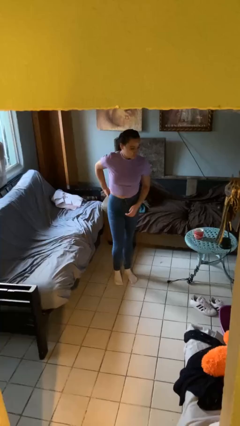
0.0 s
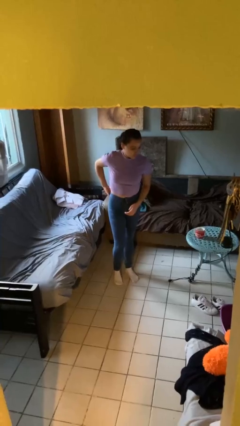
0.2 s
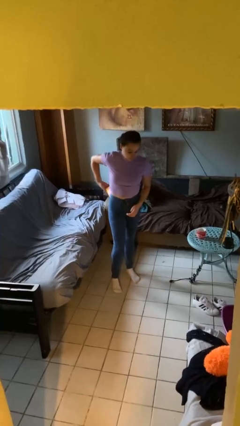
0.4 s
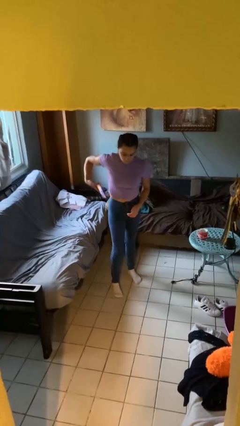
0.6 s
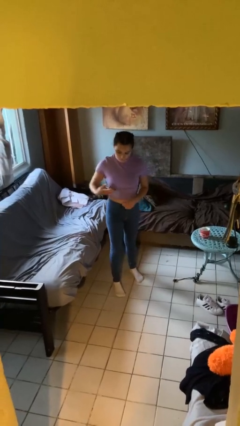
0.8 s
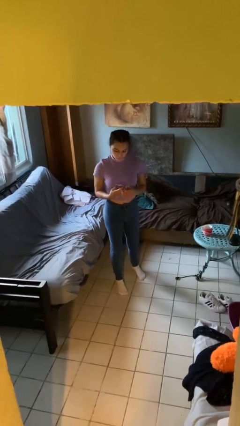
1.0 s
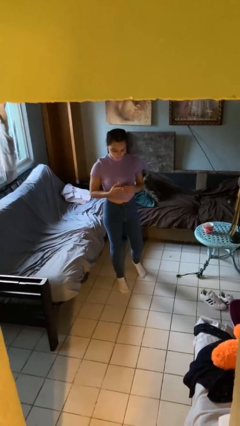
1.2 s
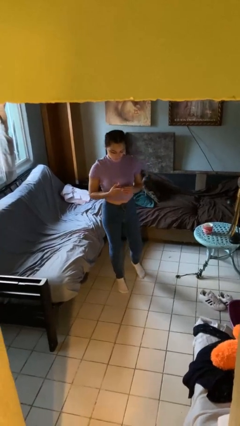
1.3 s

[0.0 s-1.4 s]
person takes phone from pocket

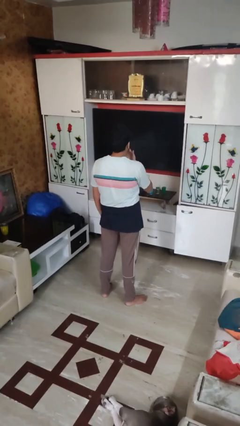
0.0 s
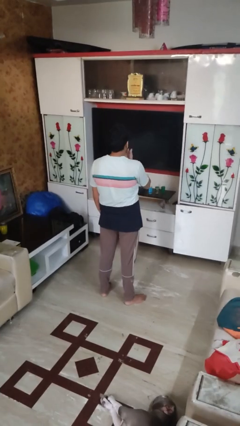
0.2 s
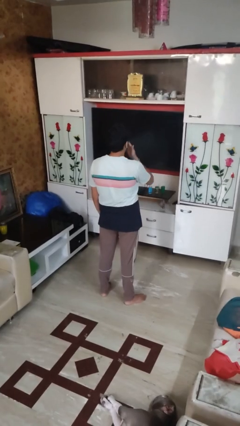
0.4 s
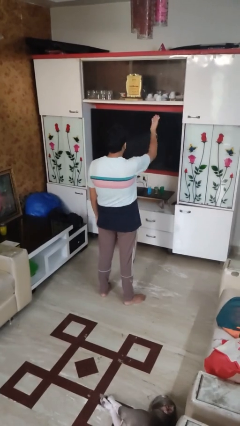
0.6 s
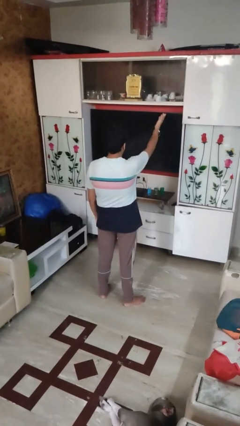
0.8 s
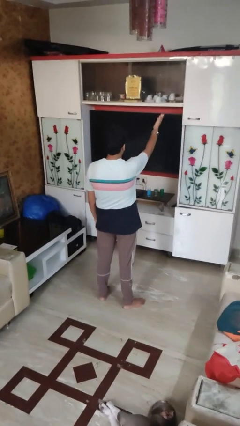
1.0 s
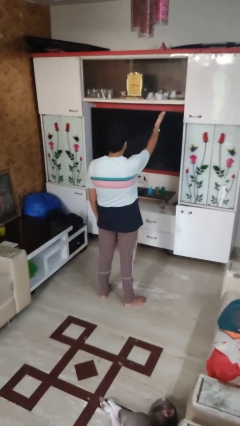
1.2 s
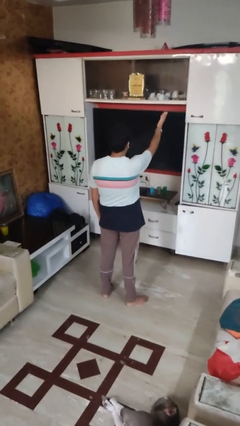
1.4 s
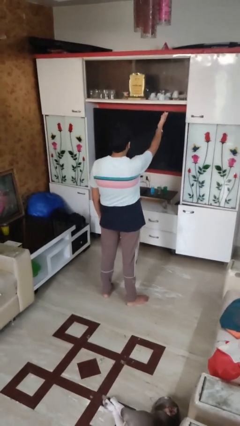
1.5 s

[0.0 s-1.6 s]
person gestures blow kiss

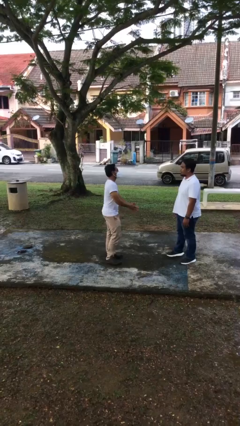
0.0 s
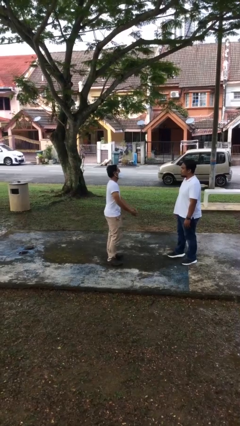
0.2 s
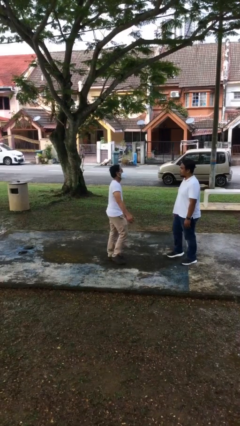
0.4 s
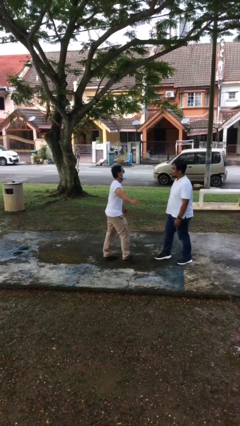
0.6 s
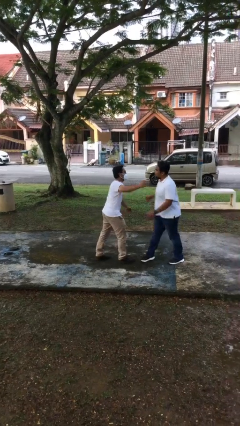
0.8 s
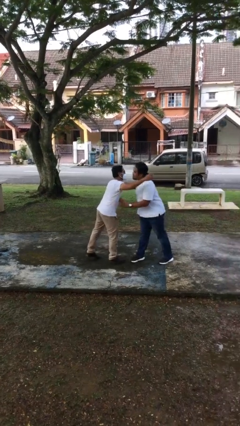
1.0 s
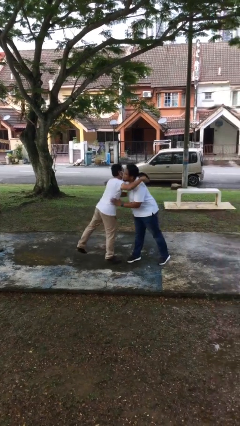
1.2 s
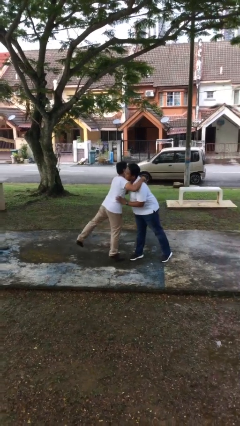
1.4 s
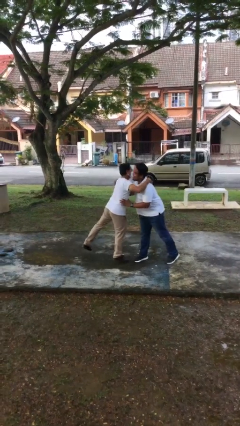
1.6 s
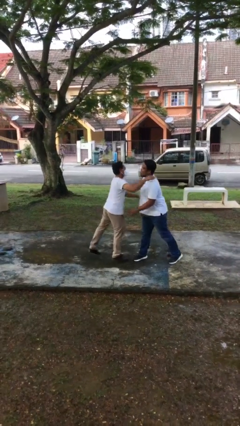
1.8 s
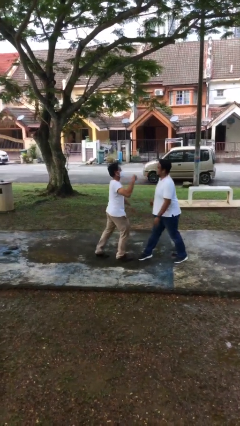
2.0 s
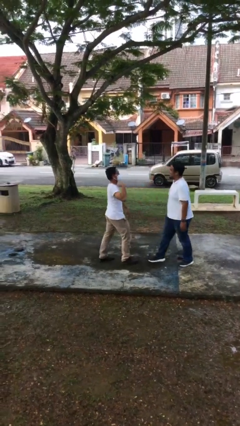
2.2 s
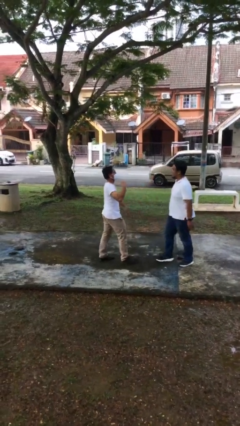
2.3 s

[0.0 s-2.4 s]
person embraces person

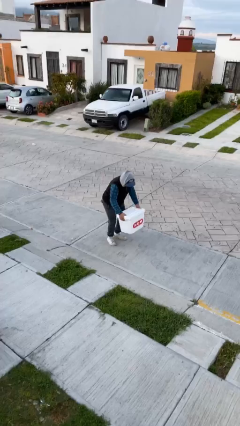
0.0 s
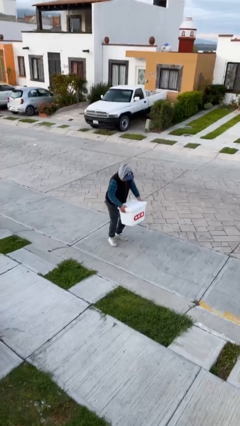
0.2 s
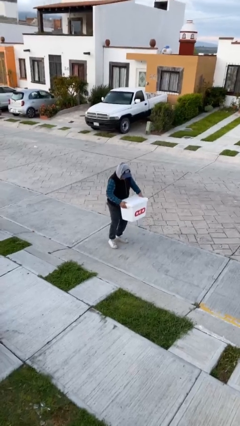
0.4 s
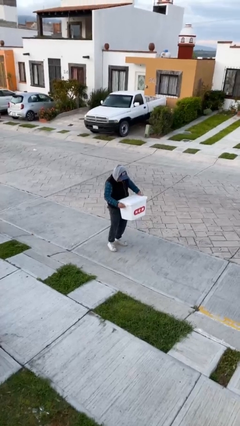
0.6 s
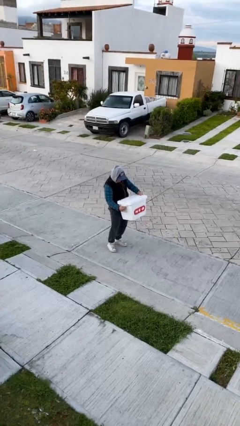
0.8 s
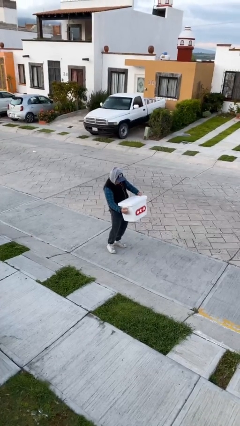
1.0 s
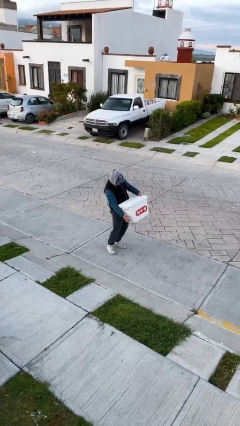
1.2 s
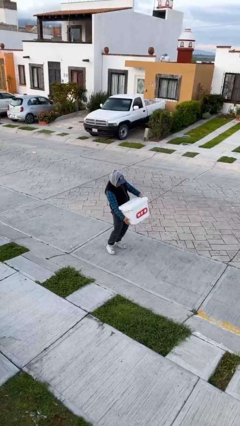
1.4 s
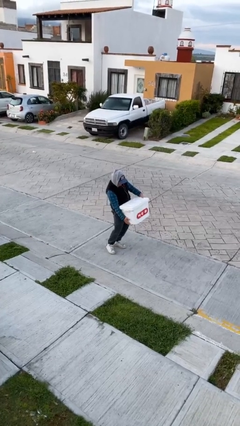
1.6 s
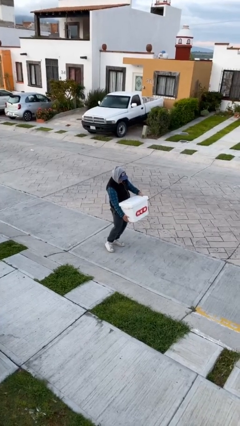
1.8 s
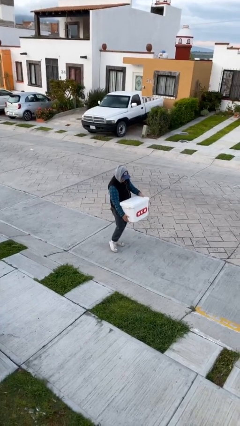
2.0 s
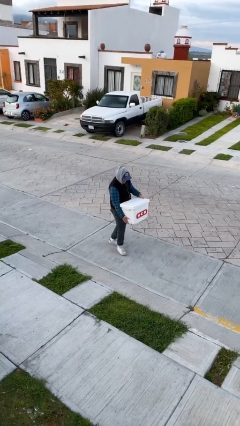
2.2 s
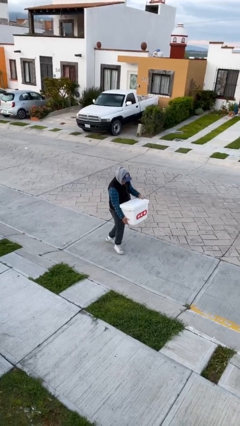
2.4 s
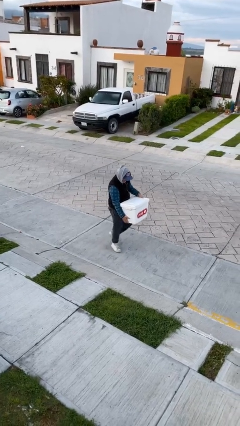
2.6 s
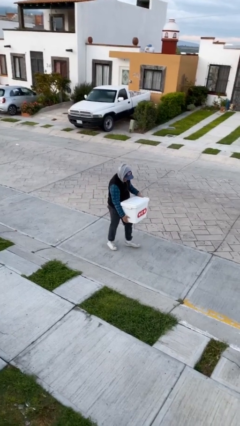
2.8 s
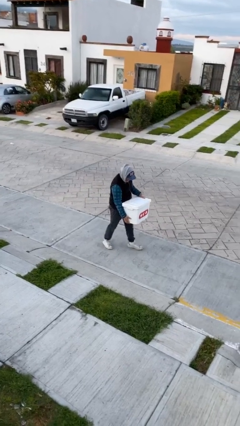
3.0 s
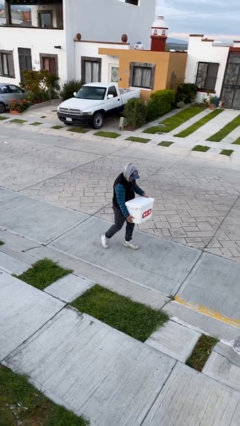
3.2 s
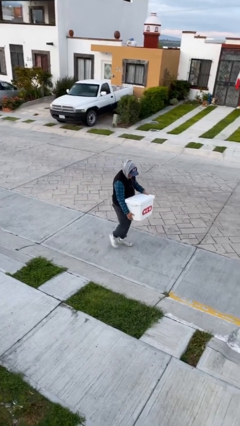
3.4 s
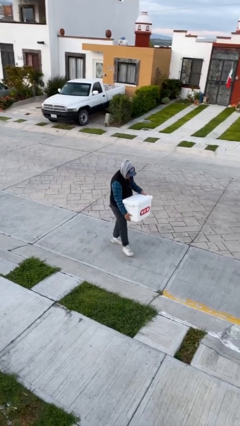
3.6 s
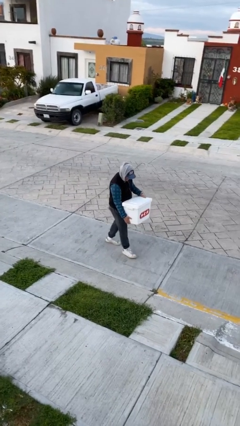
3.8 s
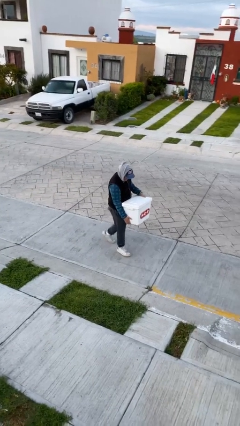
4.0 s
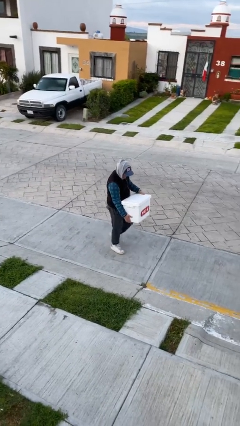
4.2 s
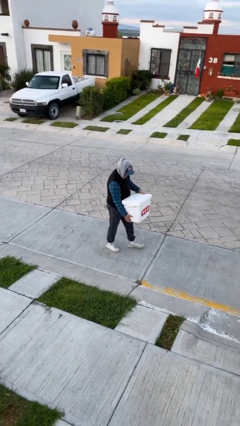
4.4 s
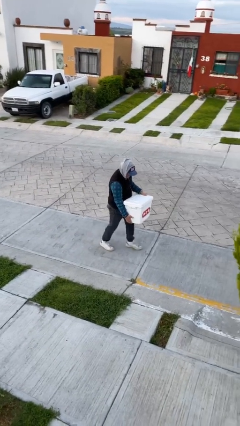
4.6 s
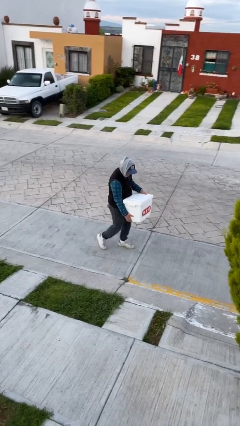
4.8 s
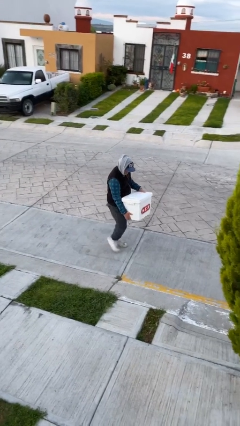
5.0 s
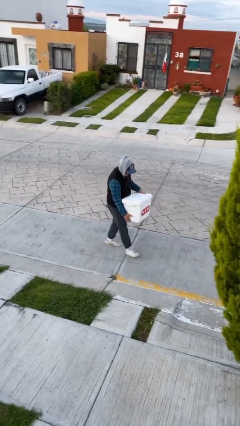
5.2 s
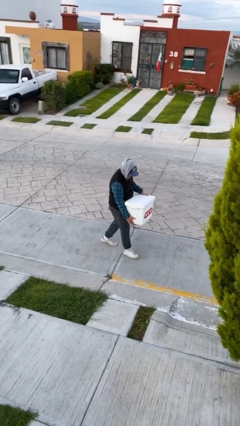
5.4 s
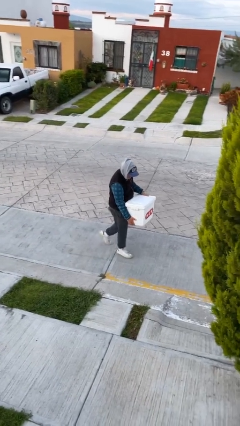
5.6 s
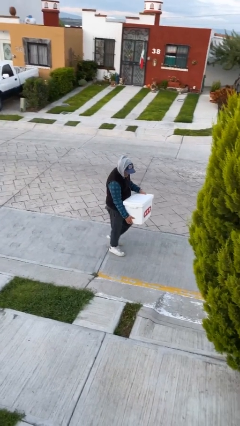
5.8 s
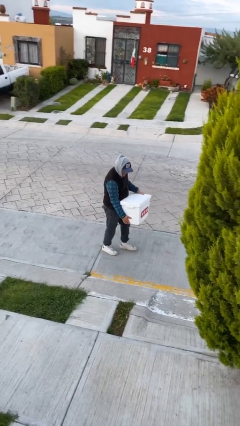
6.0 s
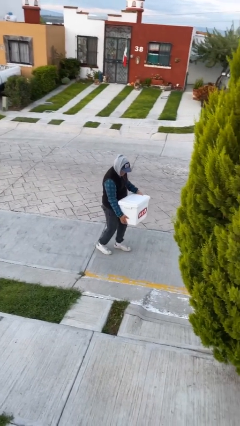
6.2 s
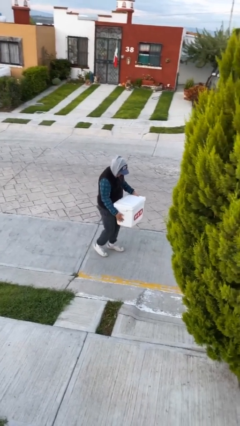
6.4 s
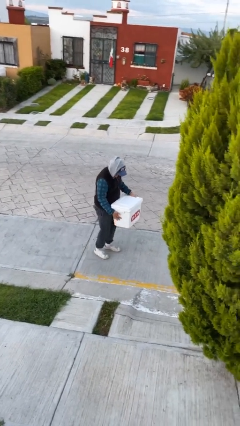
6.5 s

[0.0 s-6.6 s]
person carries heavy object

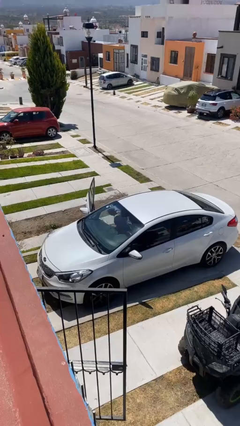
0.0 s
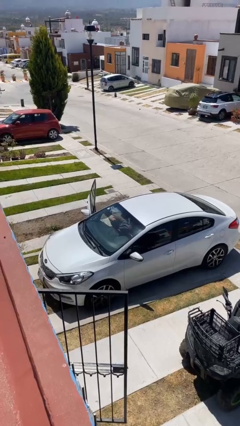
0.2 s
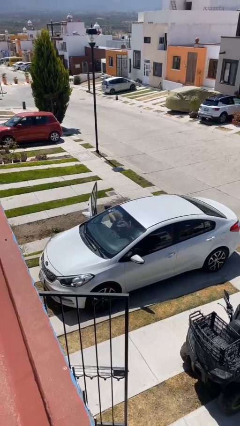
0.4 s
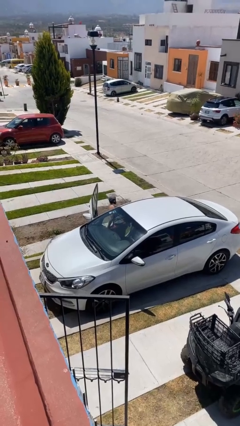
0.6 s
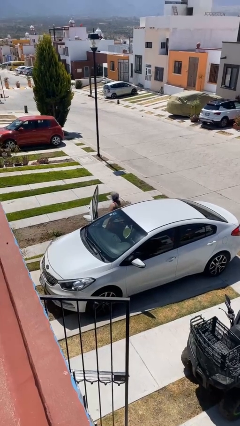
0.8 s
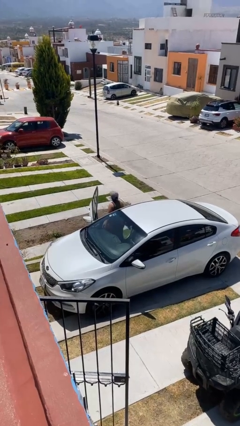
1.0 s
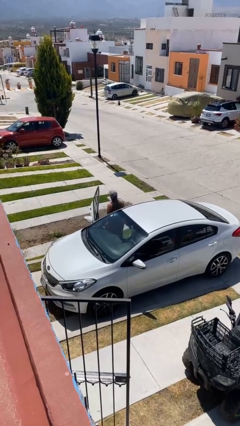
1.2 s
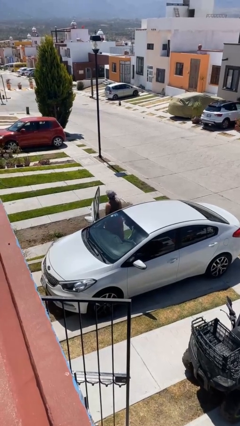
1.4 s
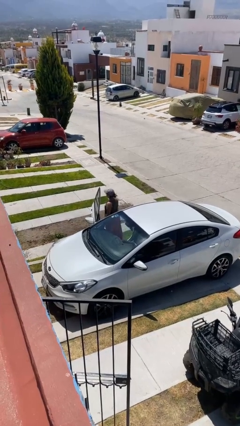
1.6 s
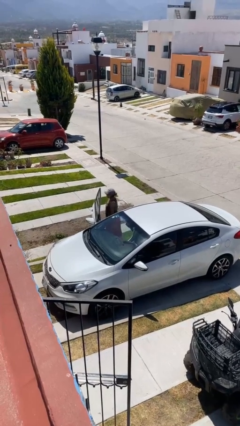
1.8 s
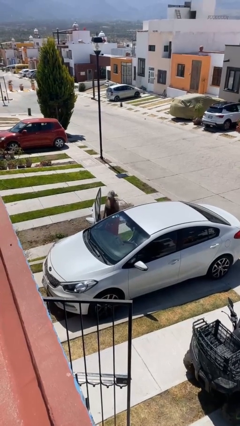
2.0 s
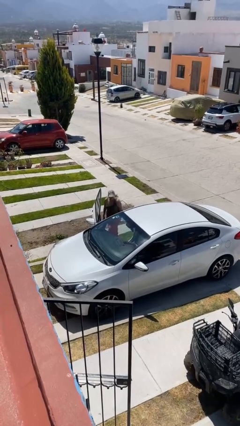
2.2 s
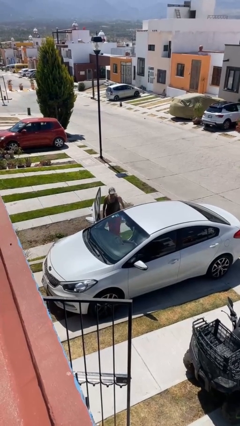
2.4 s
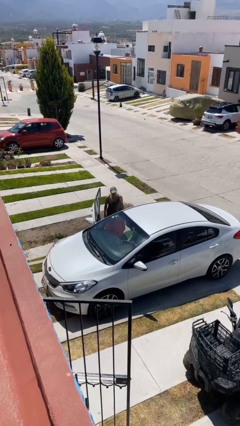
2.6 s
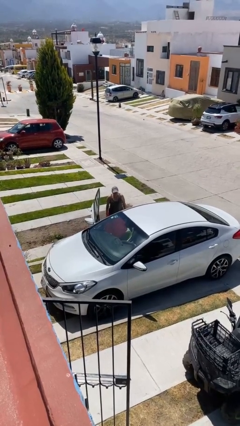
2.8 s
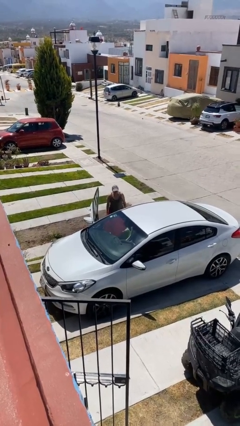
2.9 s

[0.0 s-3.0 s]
person exits car

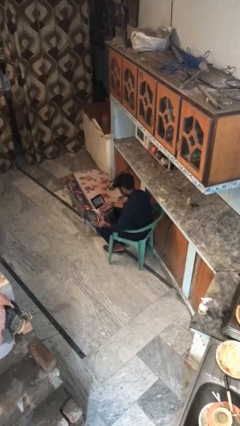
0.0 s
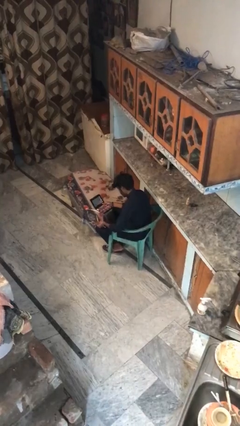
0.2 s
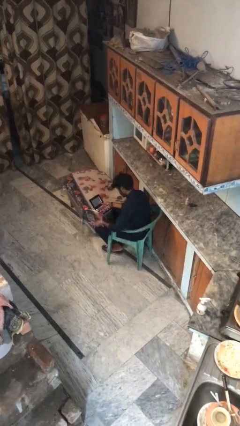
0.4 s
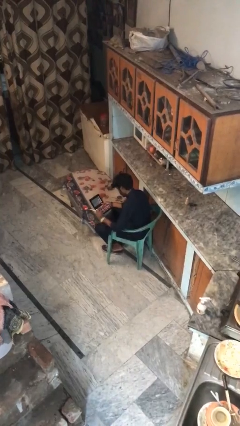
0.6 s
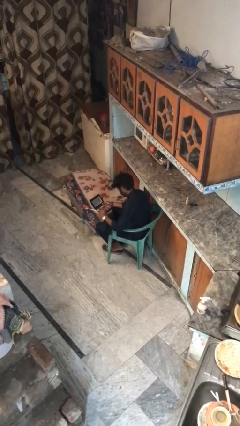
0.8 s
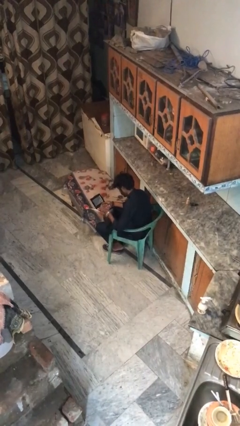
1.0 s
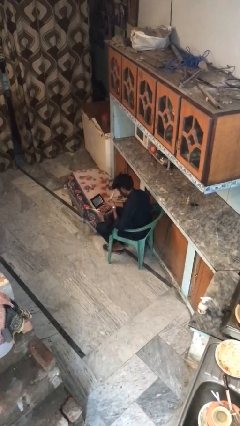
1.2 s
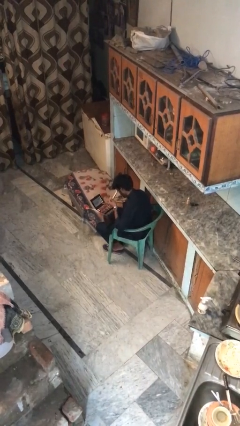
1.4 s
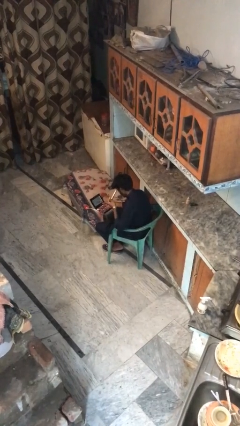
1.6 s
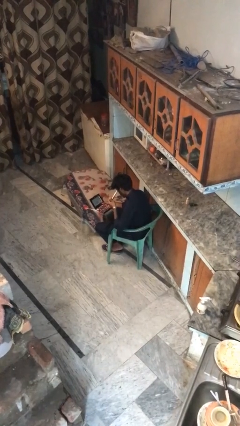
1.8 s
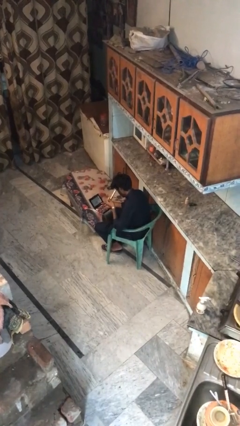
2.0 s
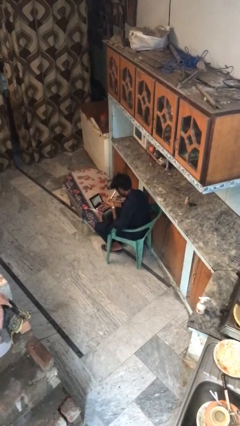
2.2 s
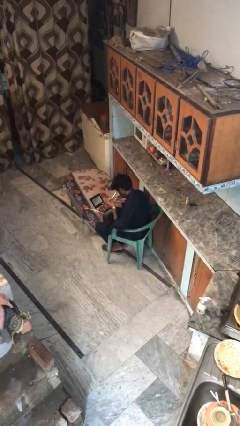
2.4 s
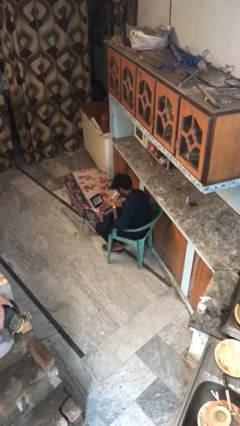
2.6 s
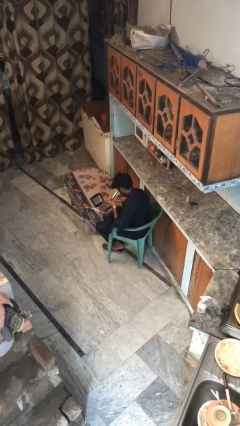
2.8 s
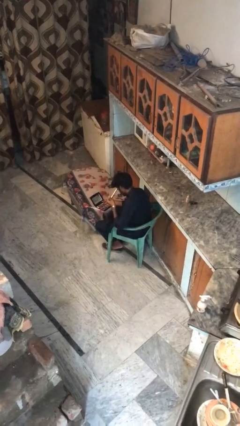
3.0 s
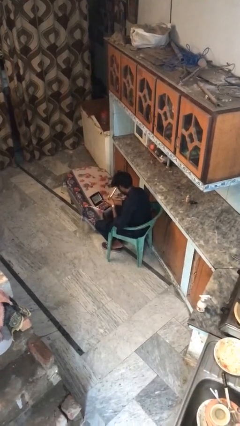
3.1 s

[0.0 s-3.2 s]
person applies eye makeup
